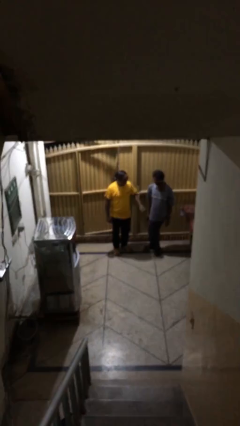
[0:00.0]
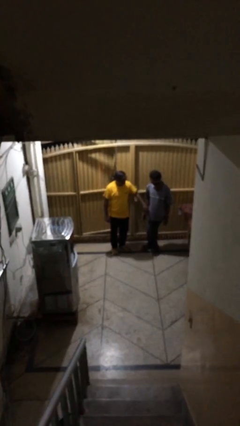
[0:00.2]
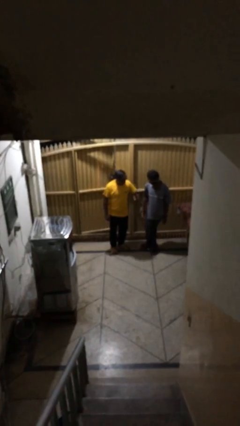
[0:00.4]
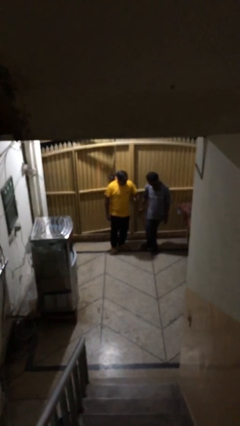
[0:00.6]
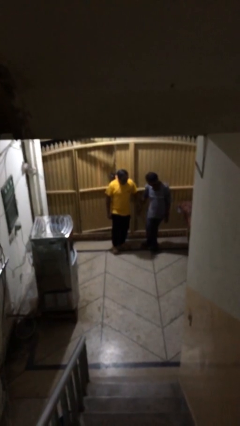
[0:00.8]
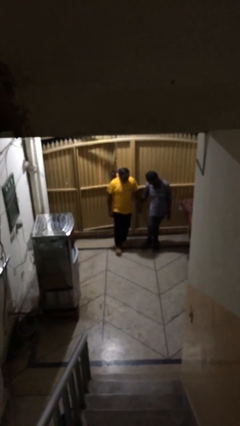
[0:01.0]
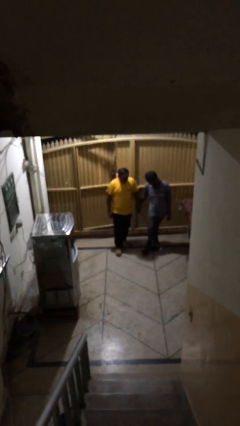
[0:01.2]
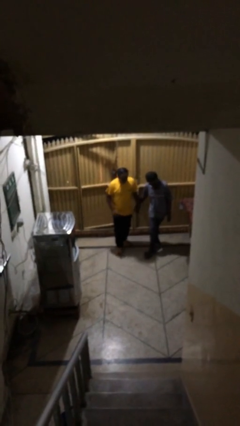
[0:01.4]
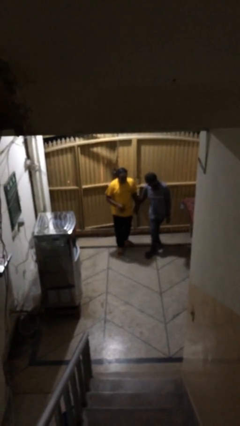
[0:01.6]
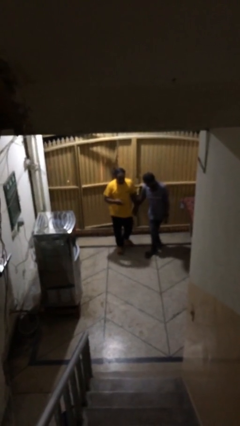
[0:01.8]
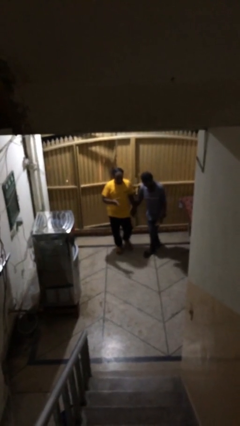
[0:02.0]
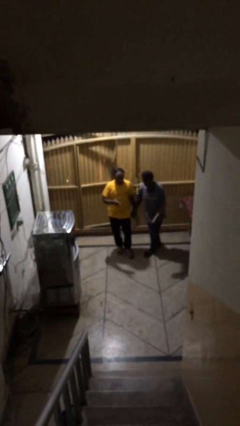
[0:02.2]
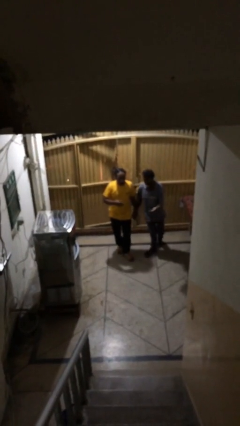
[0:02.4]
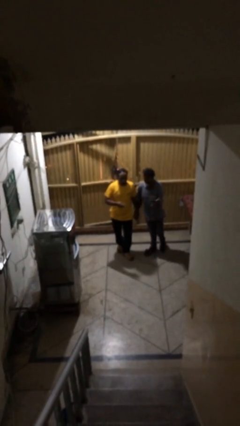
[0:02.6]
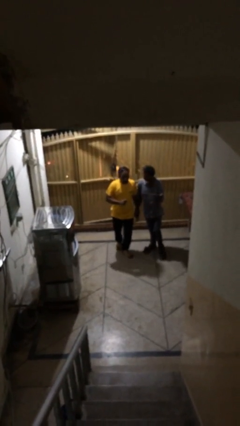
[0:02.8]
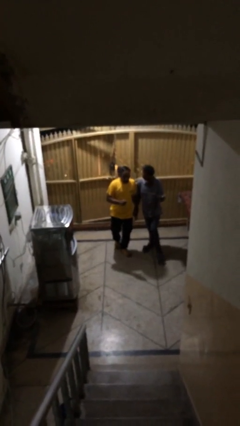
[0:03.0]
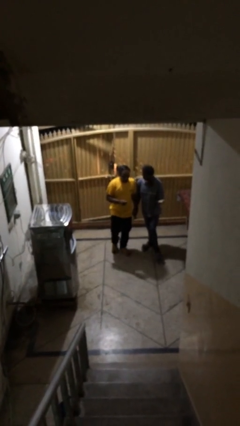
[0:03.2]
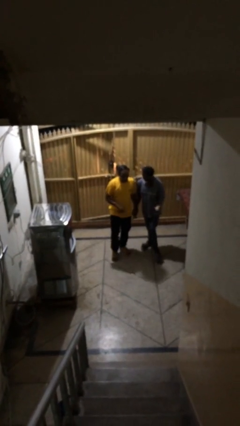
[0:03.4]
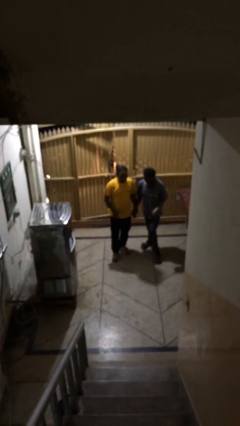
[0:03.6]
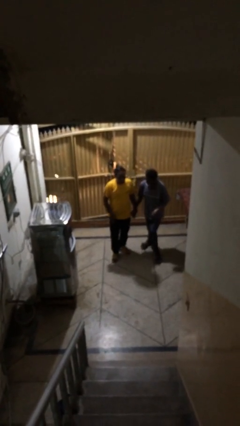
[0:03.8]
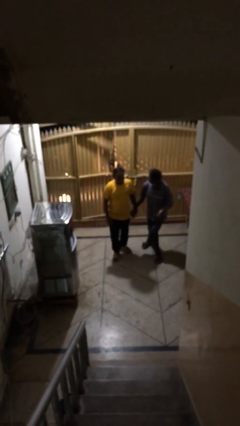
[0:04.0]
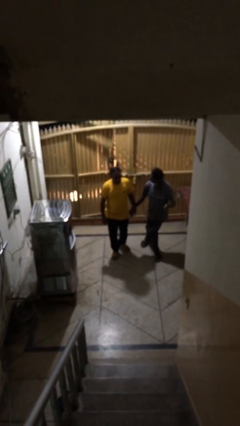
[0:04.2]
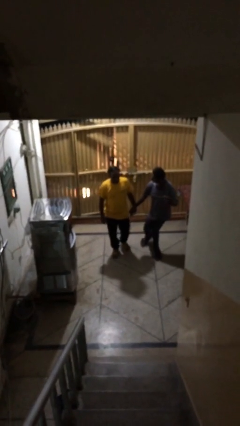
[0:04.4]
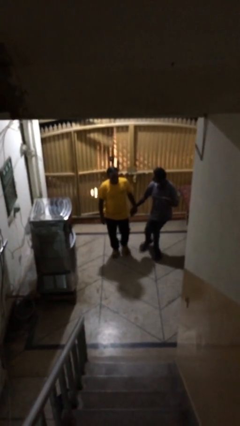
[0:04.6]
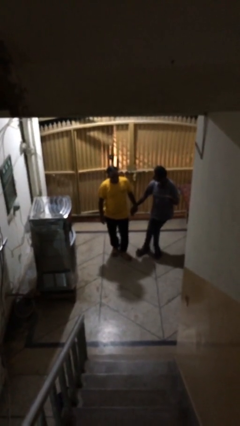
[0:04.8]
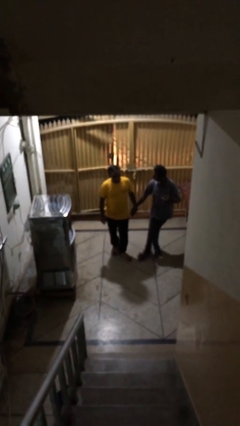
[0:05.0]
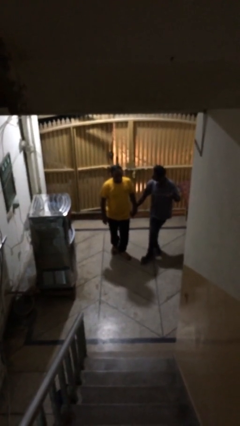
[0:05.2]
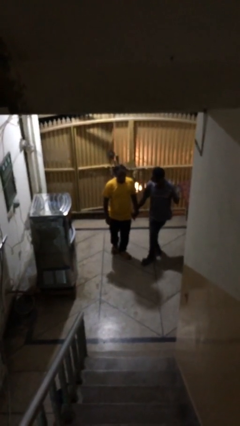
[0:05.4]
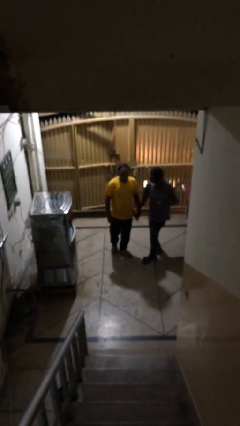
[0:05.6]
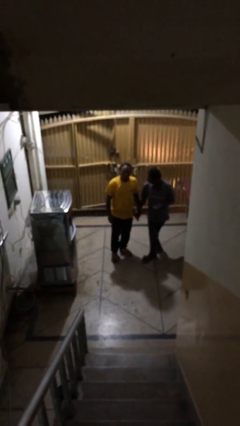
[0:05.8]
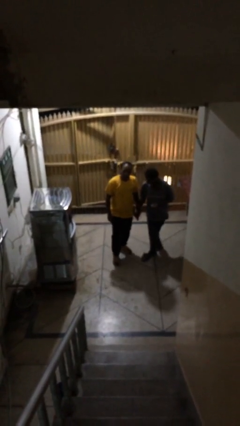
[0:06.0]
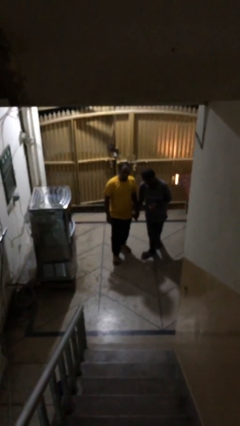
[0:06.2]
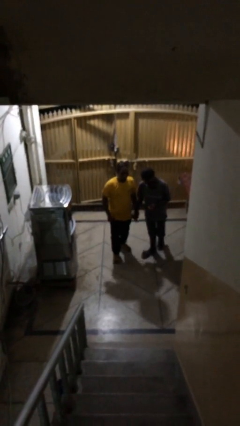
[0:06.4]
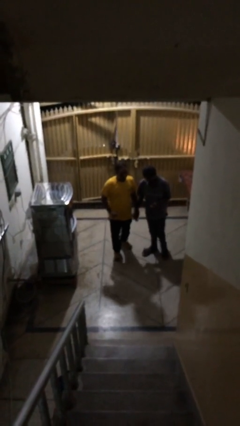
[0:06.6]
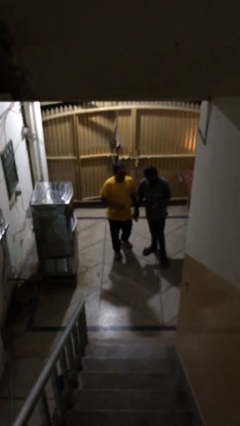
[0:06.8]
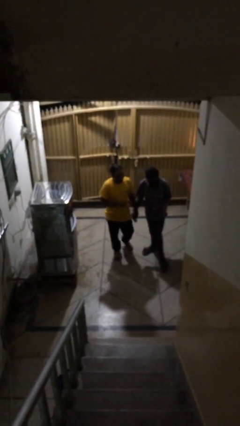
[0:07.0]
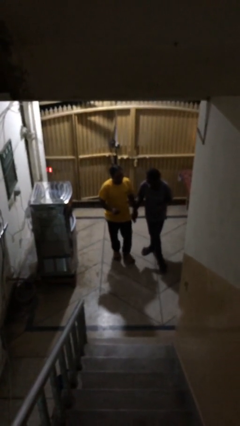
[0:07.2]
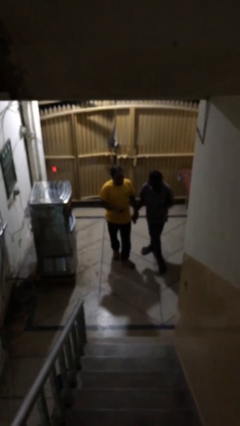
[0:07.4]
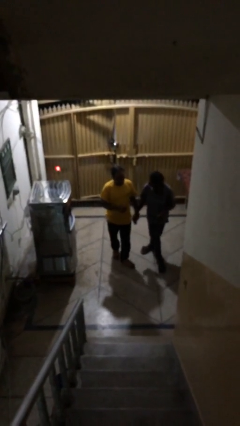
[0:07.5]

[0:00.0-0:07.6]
person holds hand

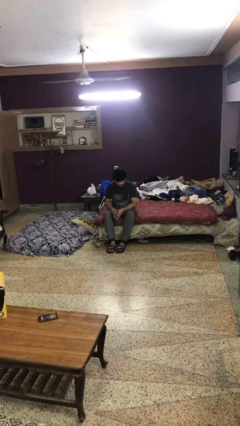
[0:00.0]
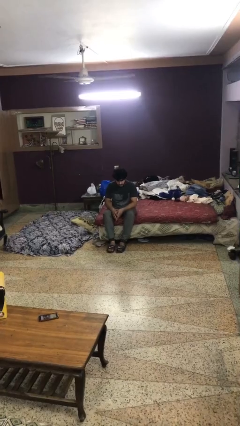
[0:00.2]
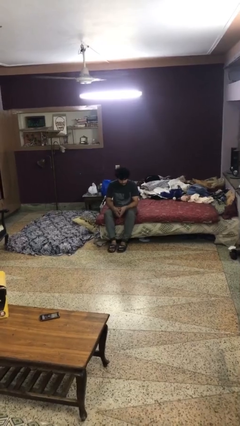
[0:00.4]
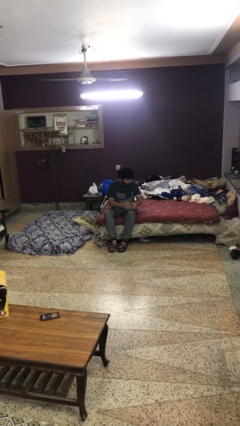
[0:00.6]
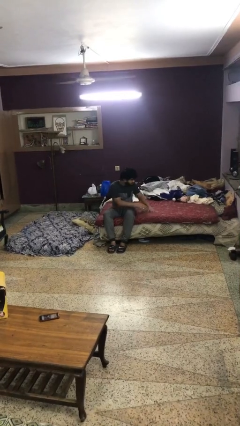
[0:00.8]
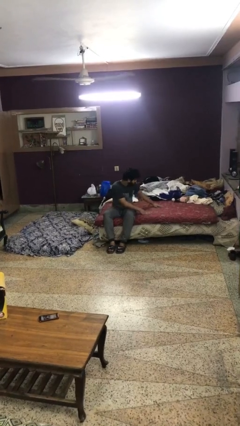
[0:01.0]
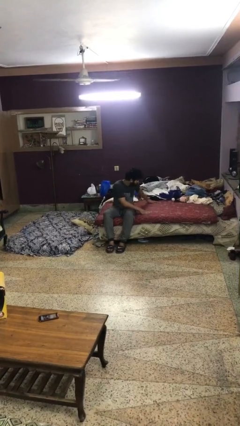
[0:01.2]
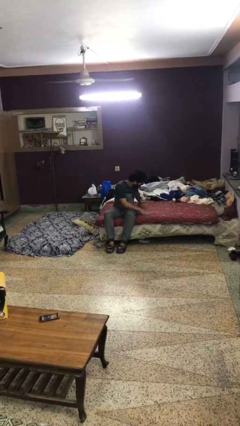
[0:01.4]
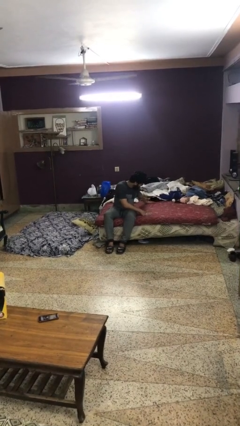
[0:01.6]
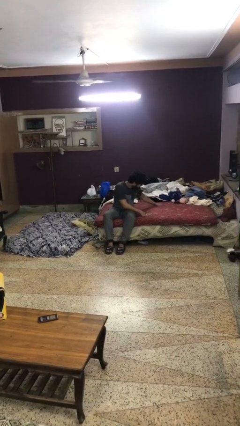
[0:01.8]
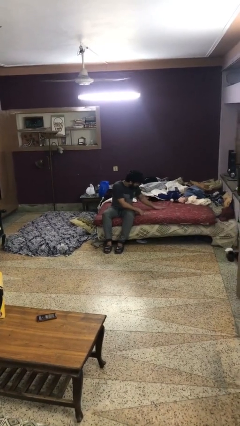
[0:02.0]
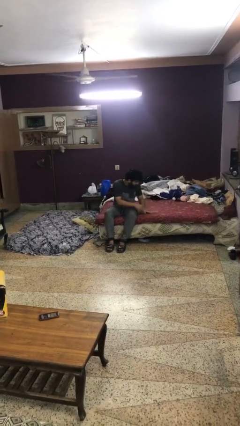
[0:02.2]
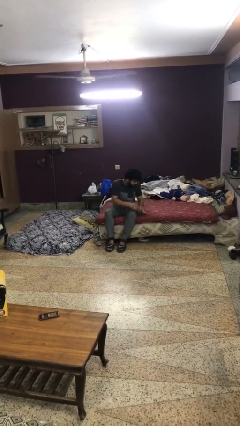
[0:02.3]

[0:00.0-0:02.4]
person searches under bed

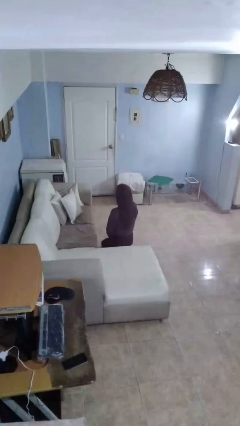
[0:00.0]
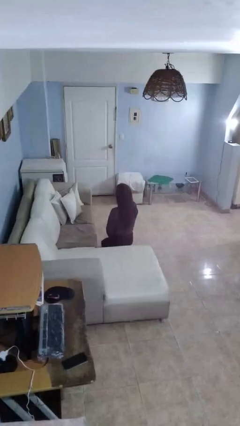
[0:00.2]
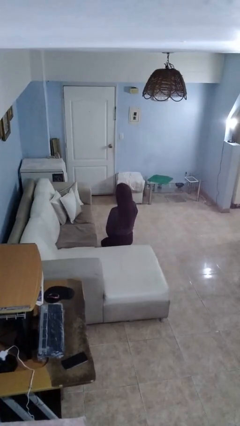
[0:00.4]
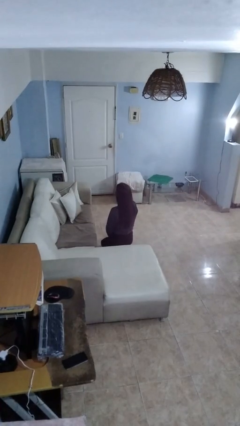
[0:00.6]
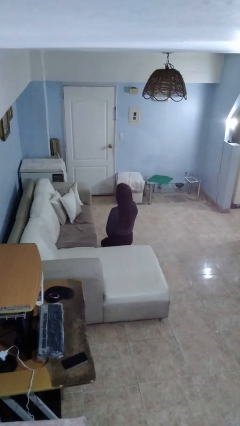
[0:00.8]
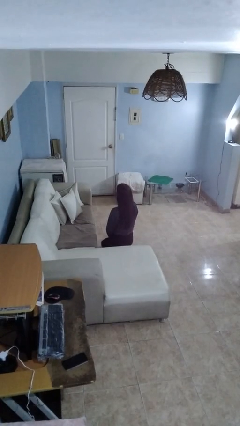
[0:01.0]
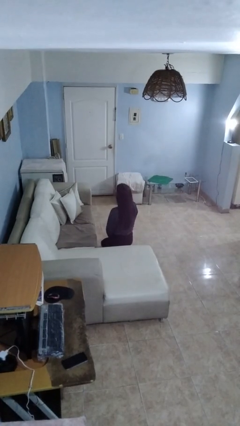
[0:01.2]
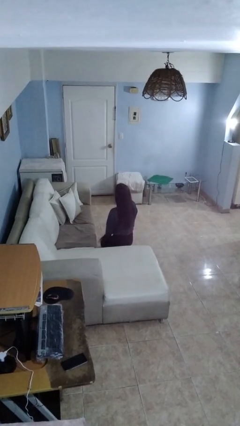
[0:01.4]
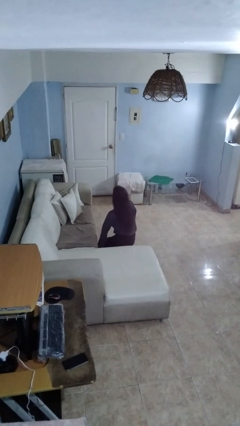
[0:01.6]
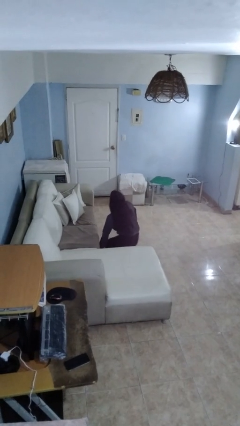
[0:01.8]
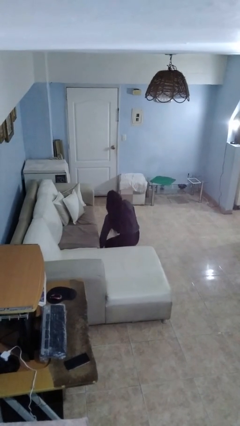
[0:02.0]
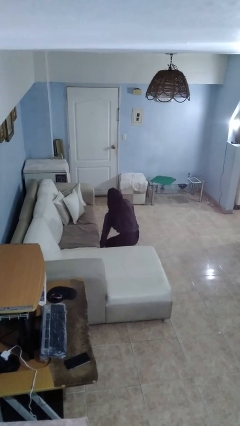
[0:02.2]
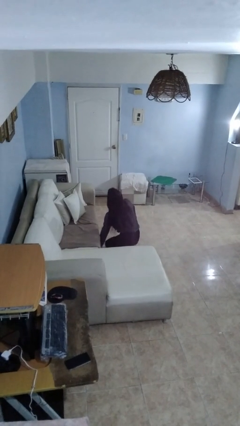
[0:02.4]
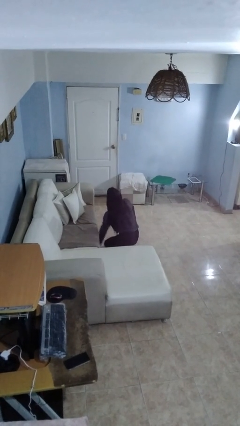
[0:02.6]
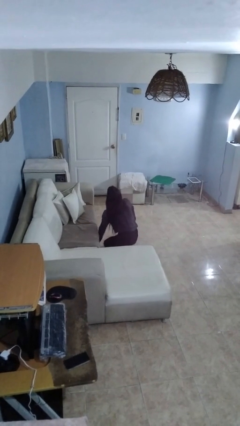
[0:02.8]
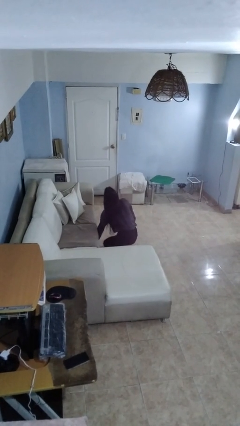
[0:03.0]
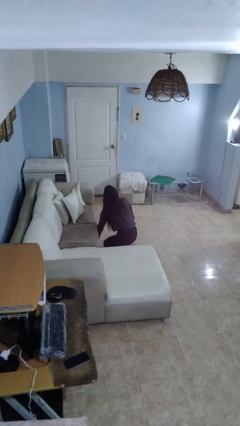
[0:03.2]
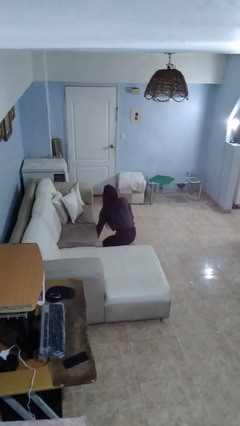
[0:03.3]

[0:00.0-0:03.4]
person searches under couch

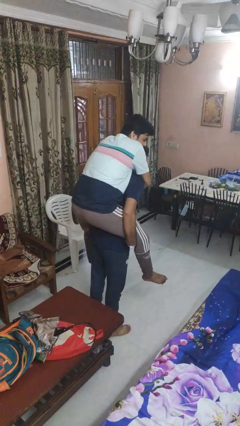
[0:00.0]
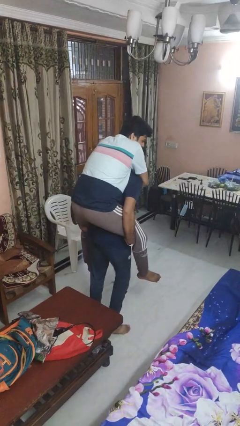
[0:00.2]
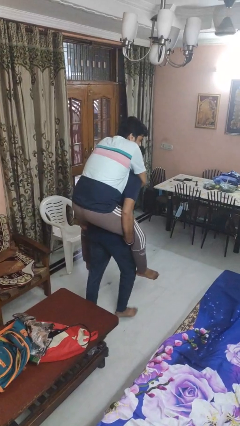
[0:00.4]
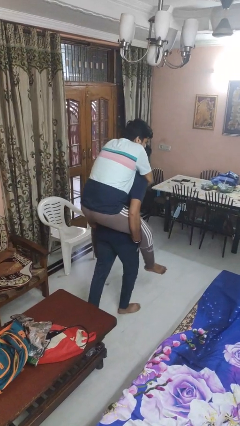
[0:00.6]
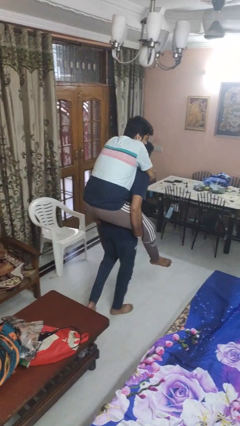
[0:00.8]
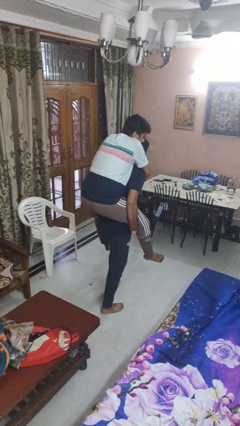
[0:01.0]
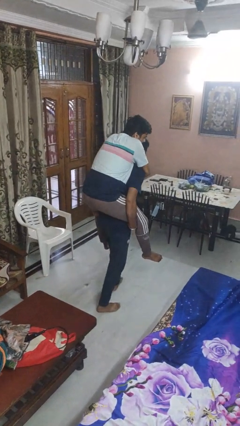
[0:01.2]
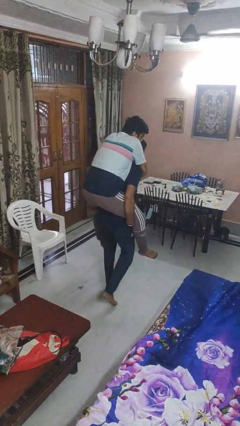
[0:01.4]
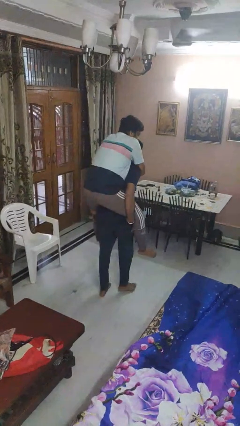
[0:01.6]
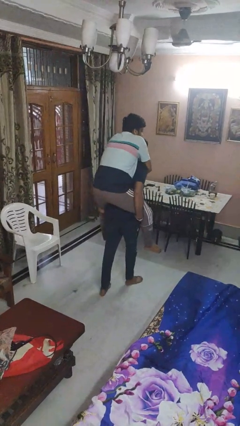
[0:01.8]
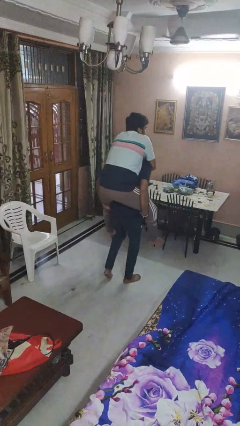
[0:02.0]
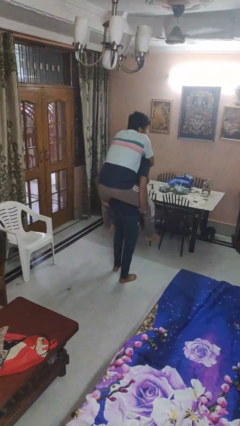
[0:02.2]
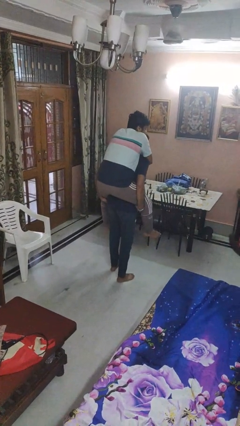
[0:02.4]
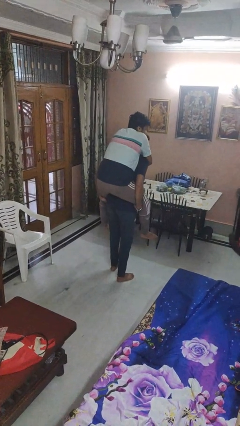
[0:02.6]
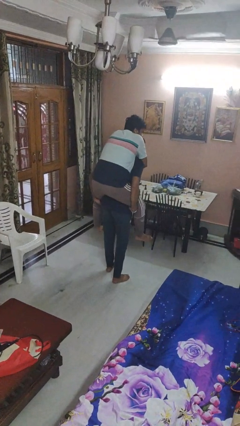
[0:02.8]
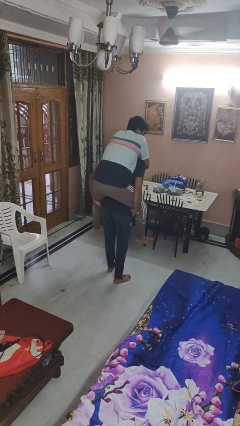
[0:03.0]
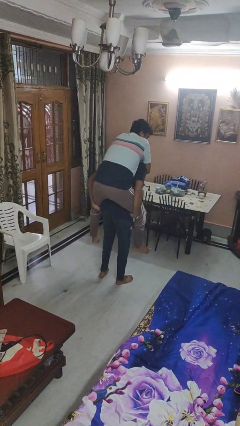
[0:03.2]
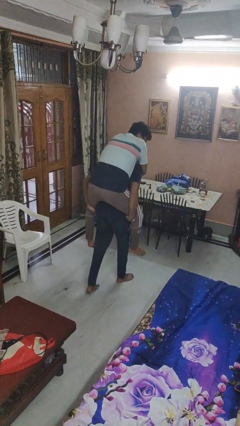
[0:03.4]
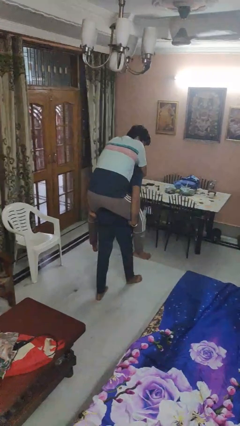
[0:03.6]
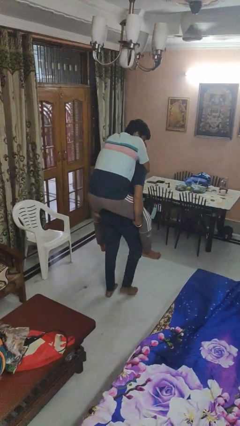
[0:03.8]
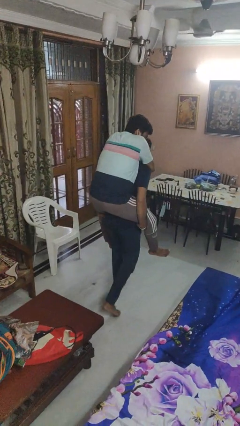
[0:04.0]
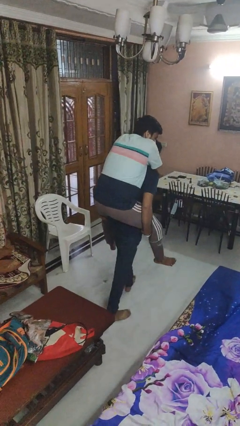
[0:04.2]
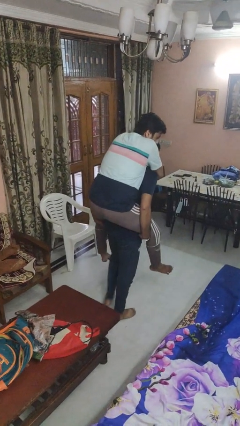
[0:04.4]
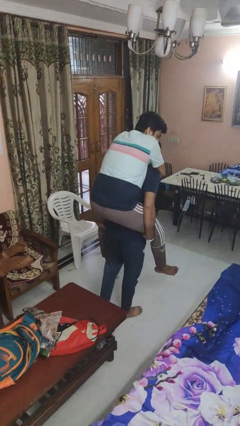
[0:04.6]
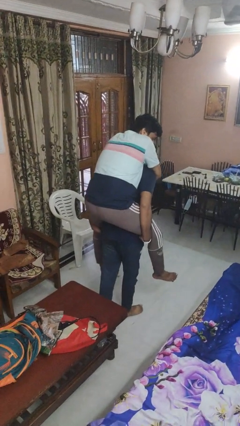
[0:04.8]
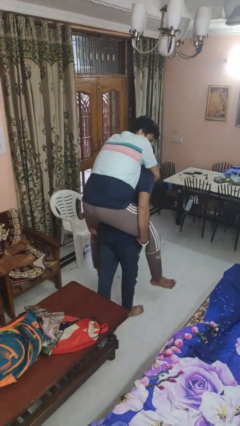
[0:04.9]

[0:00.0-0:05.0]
person carries person on back
